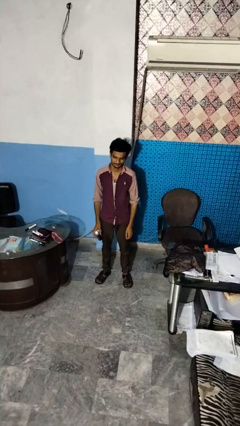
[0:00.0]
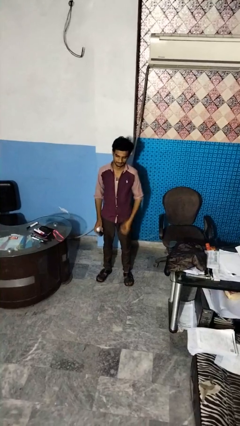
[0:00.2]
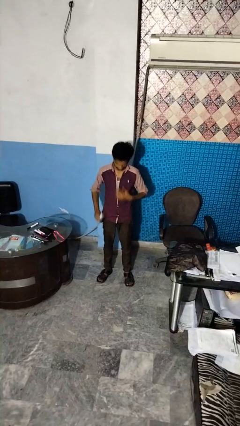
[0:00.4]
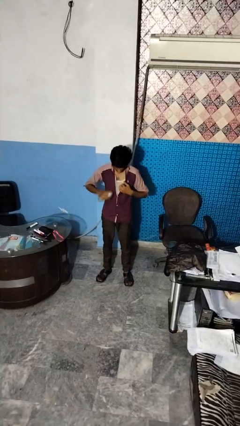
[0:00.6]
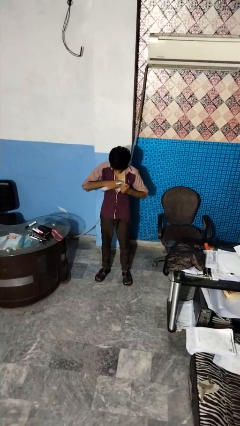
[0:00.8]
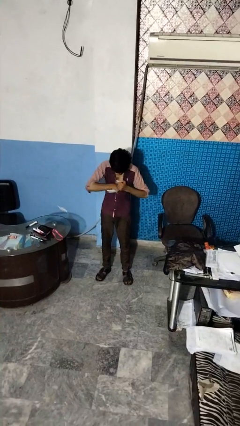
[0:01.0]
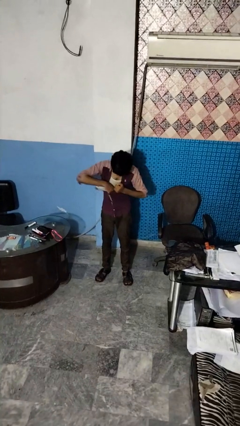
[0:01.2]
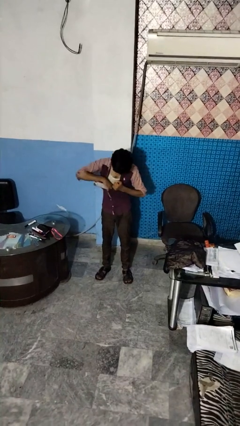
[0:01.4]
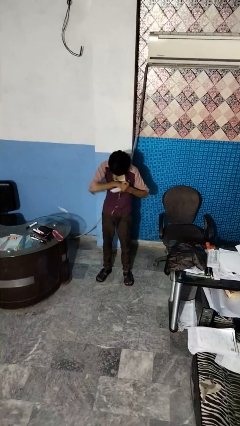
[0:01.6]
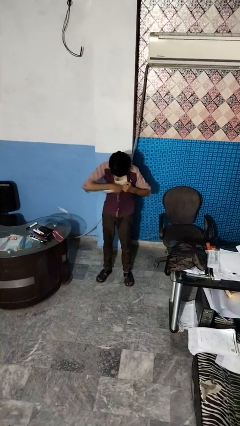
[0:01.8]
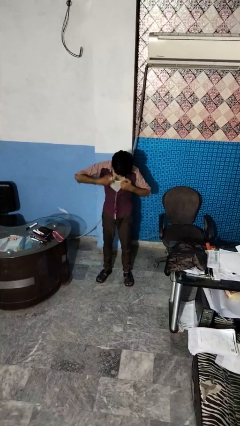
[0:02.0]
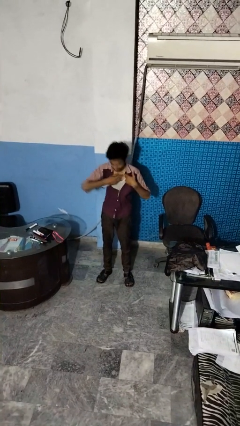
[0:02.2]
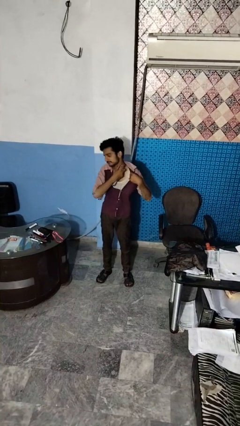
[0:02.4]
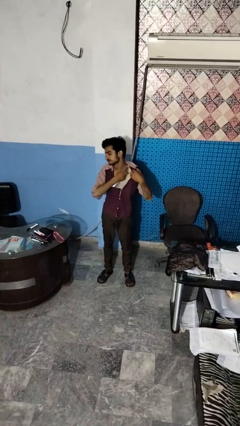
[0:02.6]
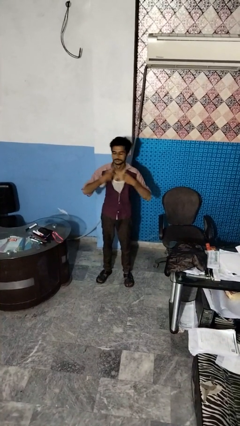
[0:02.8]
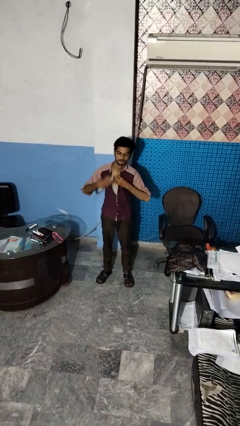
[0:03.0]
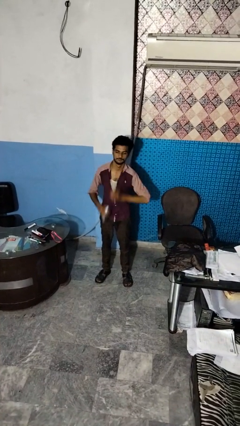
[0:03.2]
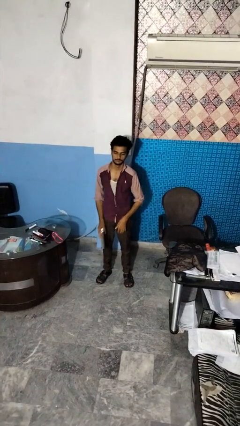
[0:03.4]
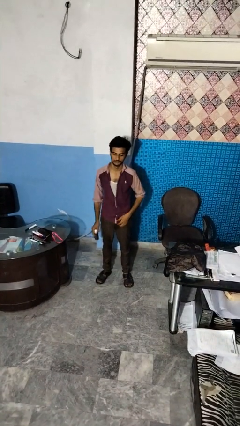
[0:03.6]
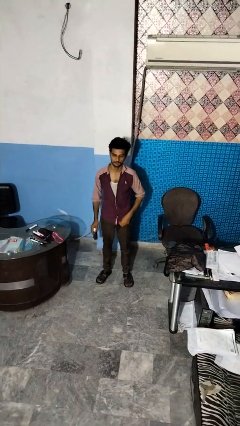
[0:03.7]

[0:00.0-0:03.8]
person applies deodorant

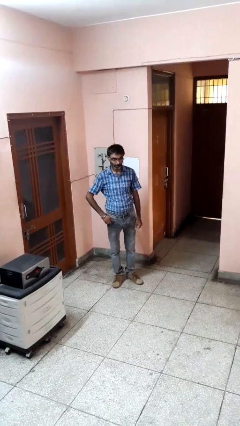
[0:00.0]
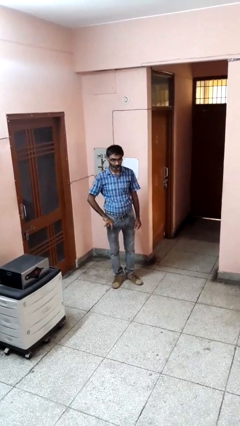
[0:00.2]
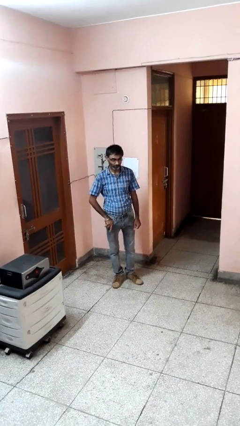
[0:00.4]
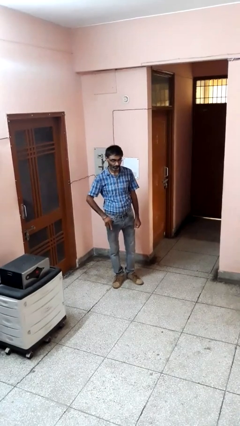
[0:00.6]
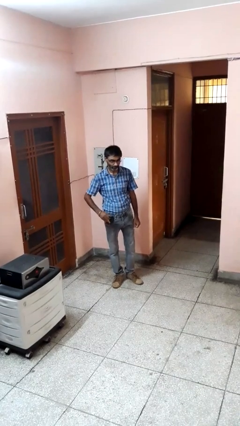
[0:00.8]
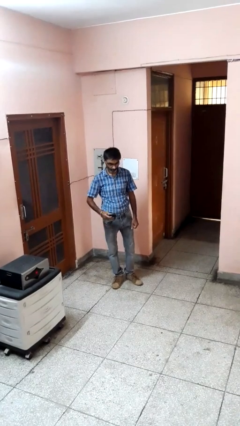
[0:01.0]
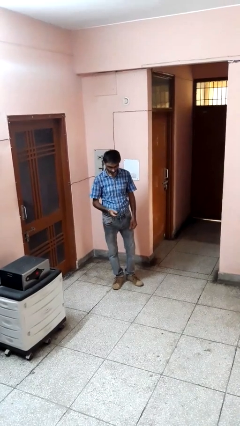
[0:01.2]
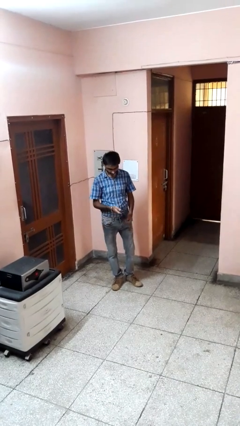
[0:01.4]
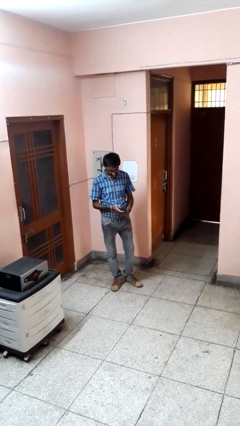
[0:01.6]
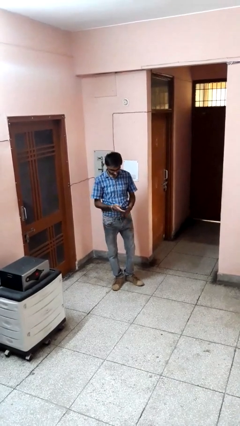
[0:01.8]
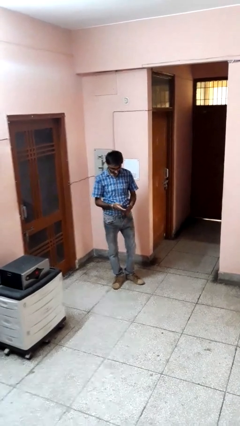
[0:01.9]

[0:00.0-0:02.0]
person takes phone from pocket

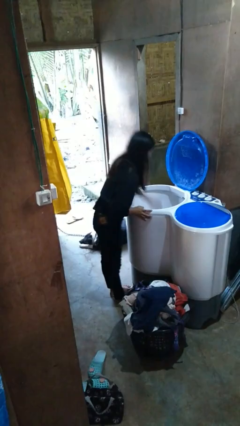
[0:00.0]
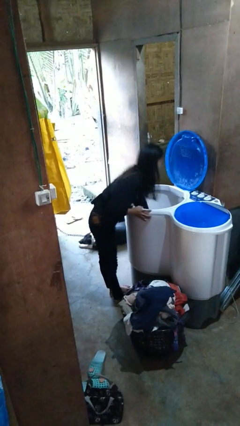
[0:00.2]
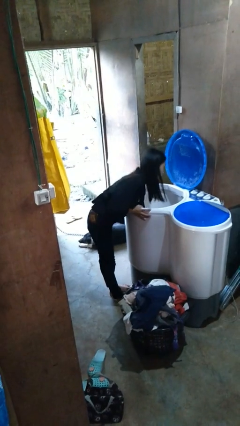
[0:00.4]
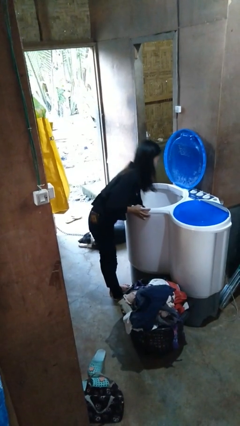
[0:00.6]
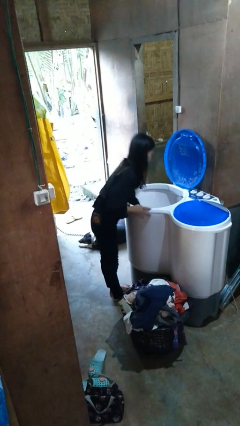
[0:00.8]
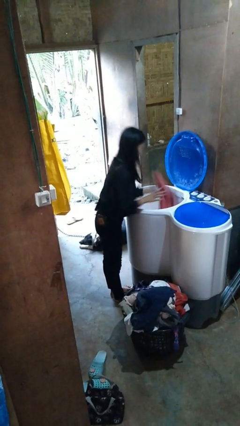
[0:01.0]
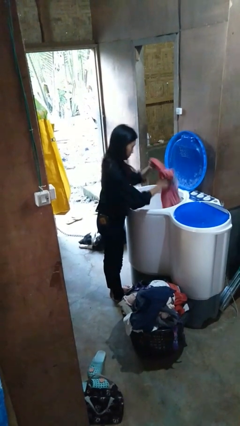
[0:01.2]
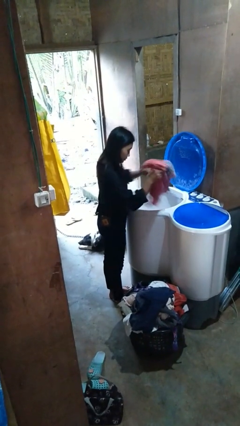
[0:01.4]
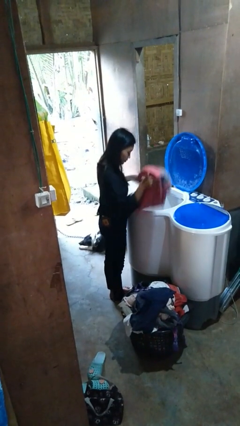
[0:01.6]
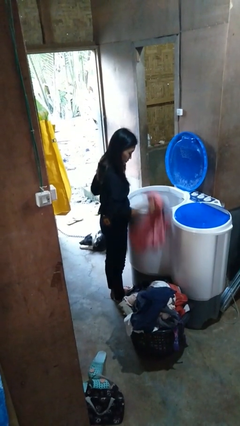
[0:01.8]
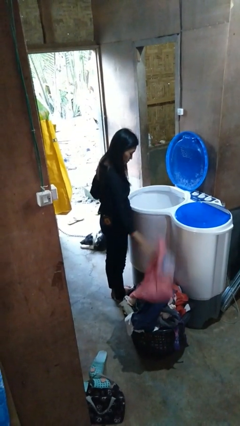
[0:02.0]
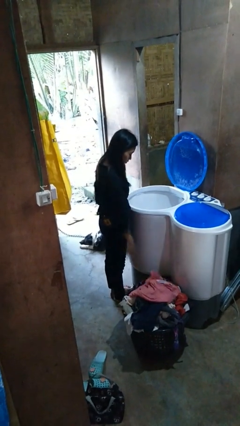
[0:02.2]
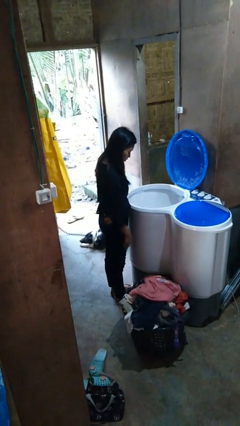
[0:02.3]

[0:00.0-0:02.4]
person unloads clotheswasher

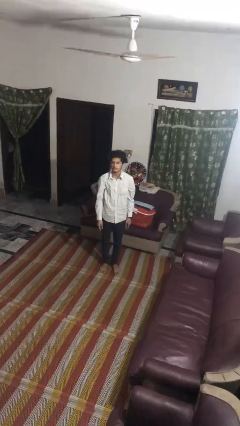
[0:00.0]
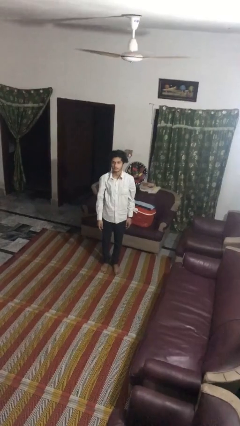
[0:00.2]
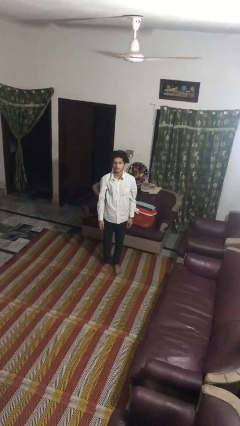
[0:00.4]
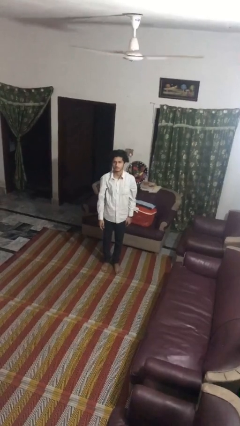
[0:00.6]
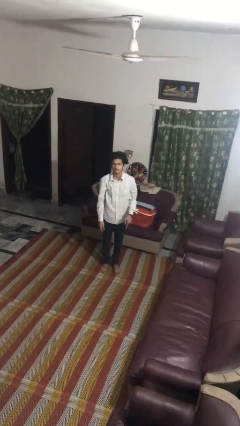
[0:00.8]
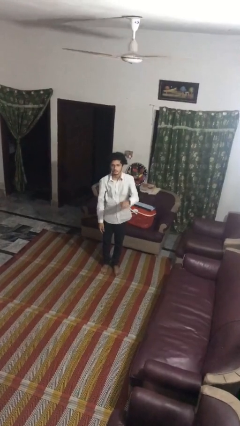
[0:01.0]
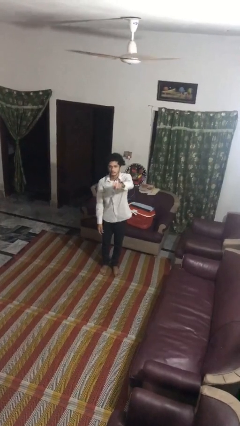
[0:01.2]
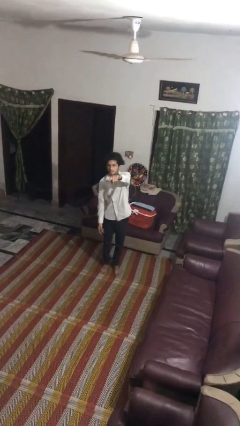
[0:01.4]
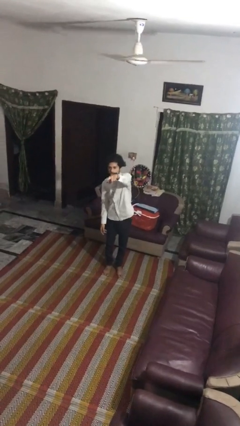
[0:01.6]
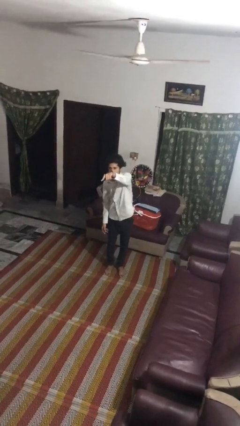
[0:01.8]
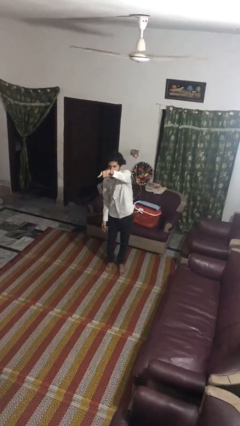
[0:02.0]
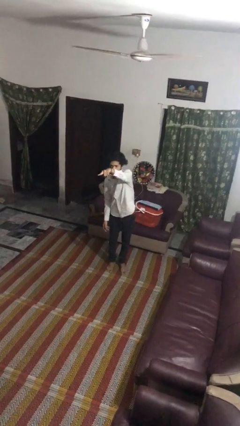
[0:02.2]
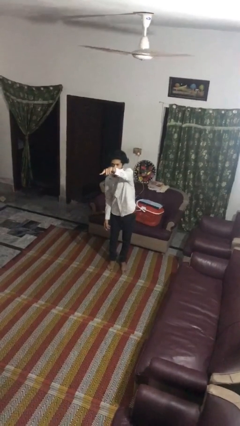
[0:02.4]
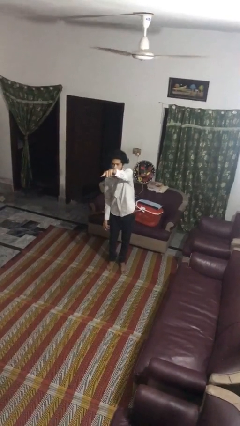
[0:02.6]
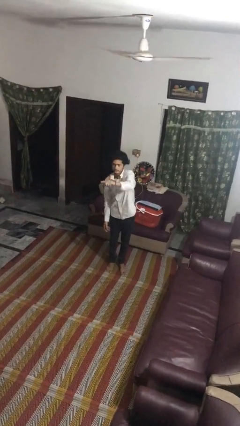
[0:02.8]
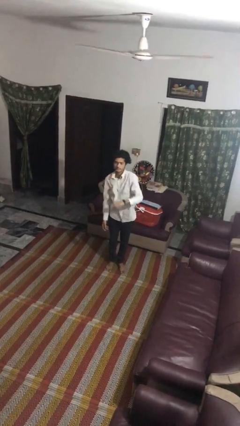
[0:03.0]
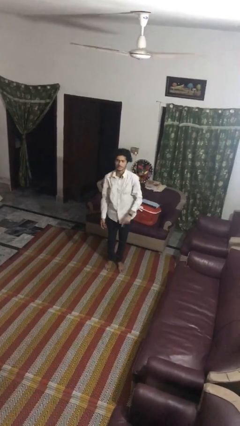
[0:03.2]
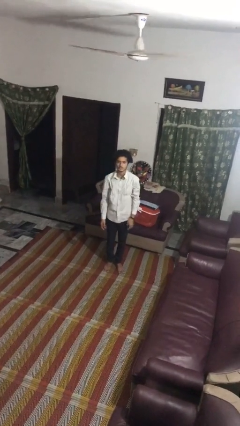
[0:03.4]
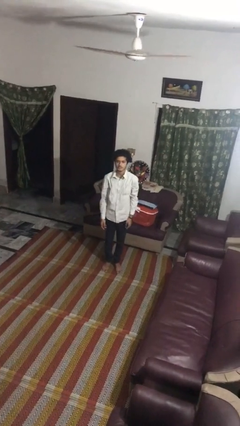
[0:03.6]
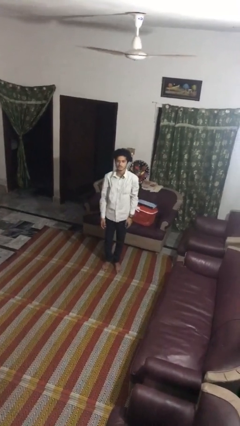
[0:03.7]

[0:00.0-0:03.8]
person points at person

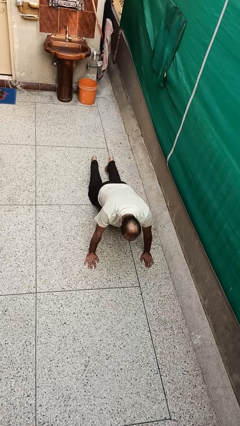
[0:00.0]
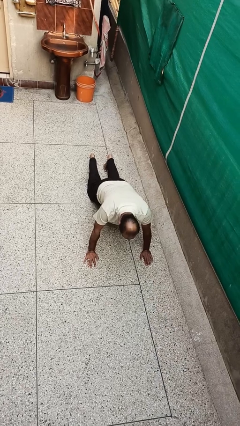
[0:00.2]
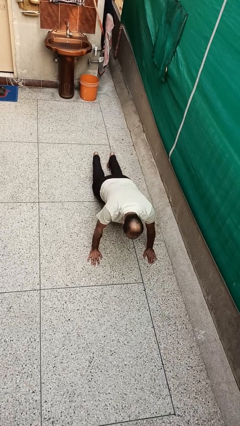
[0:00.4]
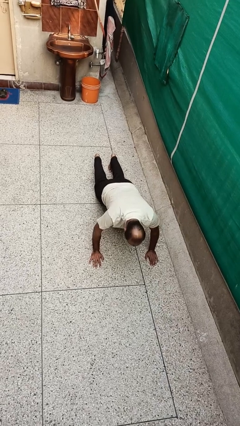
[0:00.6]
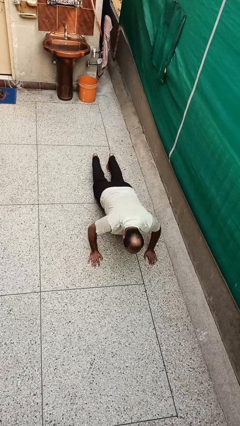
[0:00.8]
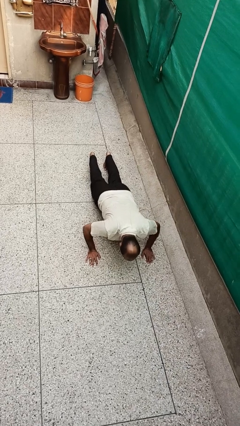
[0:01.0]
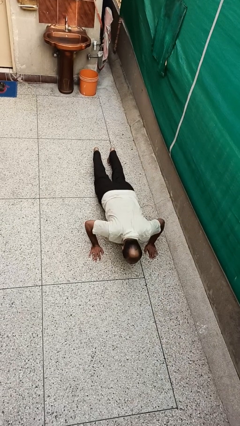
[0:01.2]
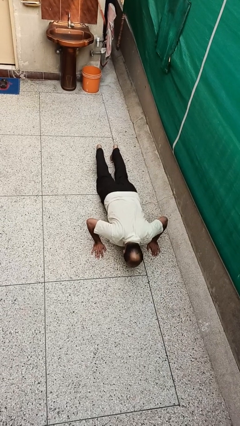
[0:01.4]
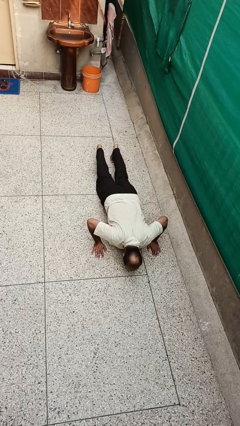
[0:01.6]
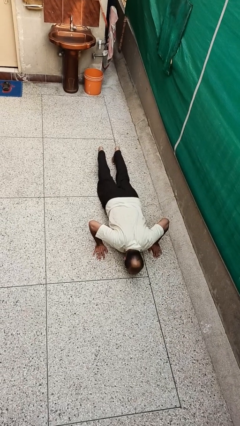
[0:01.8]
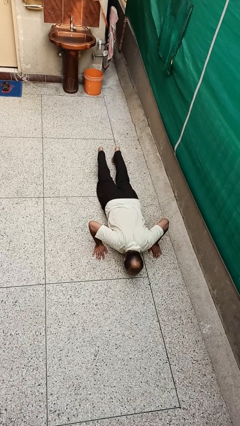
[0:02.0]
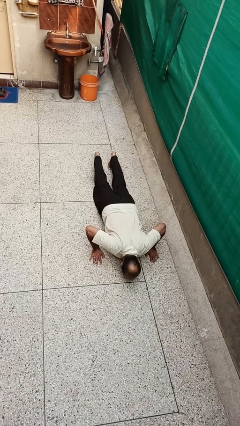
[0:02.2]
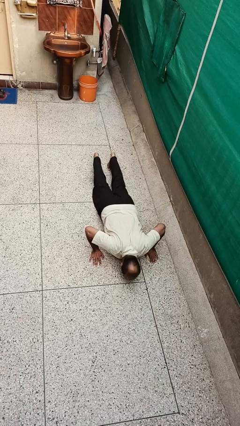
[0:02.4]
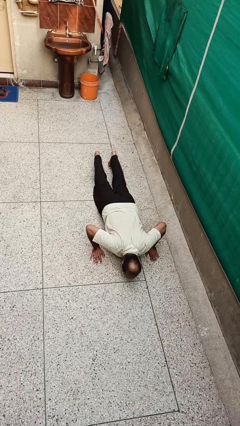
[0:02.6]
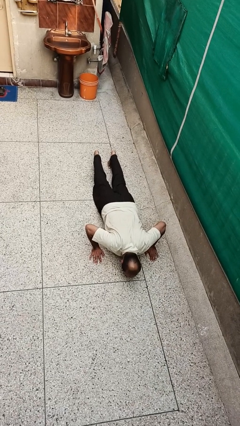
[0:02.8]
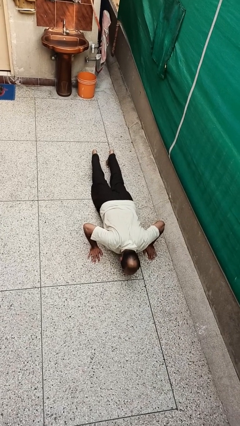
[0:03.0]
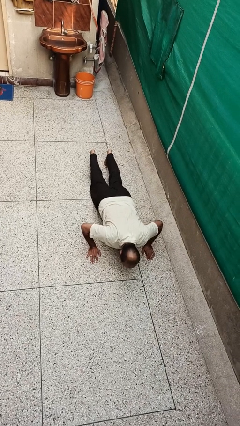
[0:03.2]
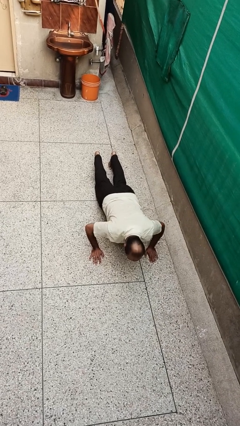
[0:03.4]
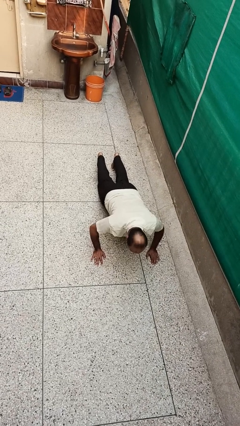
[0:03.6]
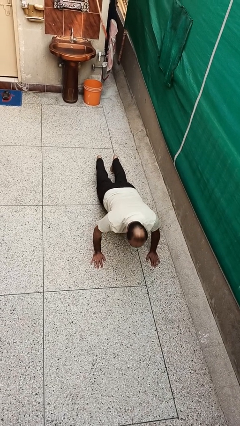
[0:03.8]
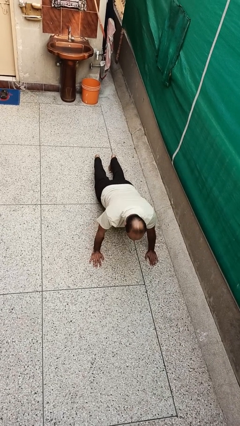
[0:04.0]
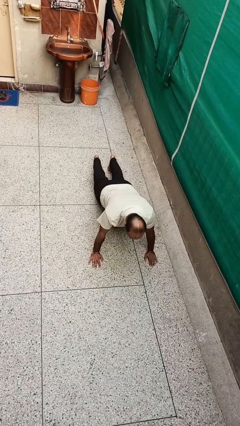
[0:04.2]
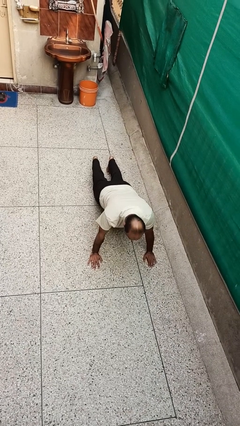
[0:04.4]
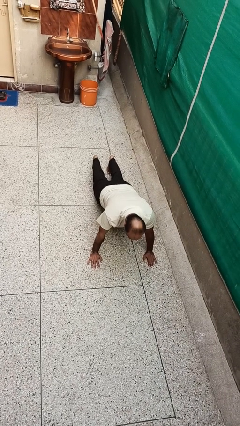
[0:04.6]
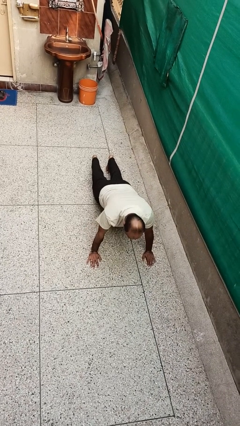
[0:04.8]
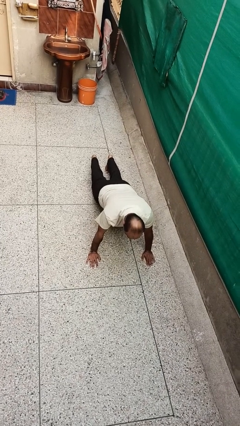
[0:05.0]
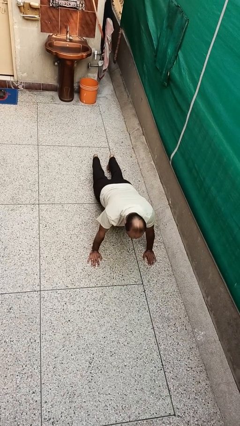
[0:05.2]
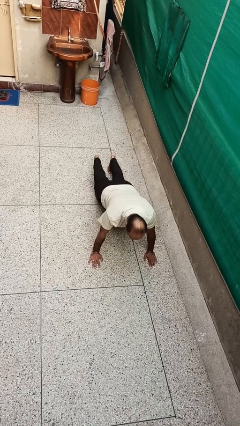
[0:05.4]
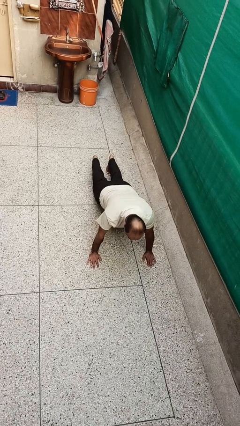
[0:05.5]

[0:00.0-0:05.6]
person exercises with pushup
